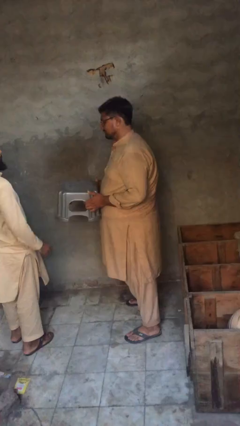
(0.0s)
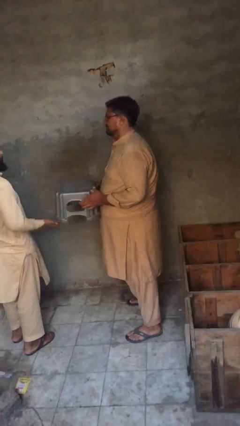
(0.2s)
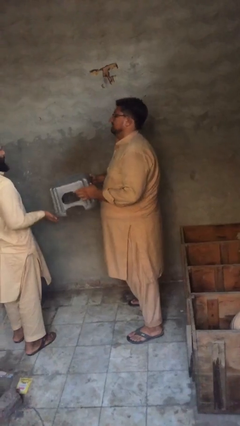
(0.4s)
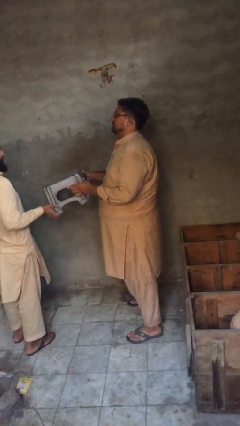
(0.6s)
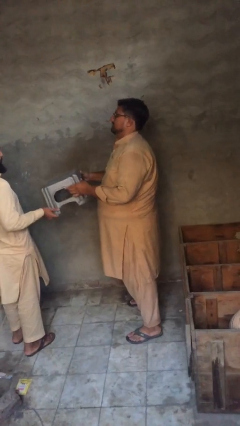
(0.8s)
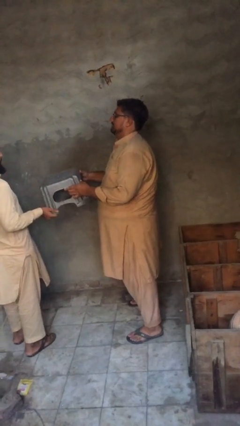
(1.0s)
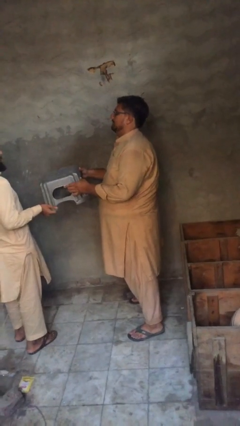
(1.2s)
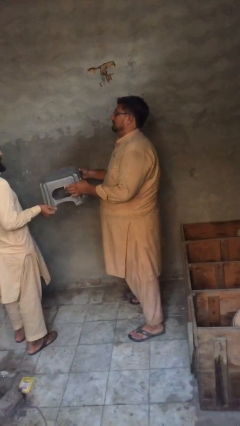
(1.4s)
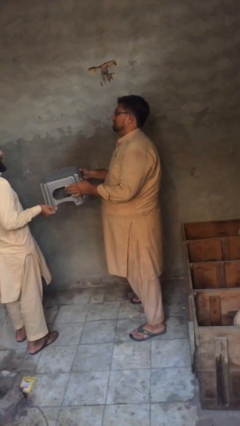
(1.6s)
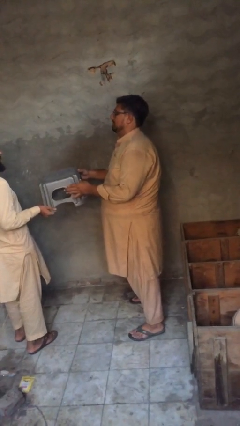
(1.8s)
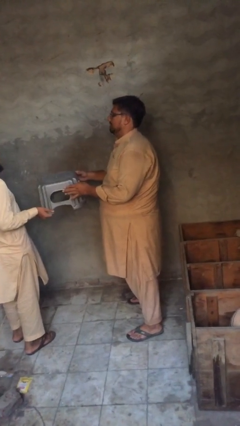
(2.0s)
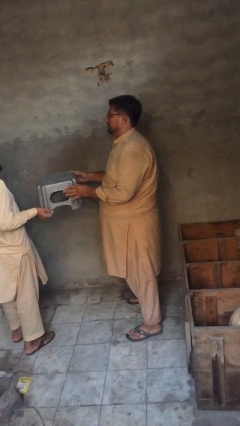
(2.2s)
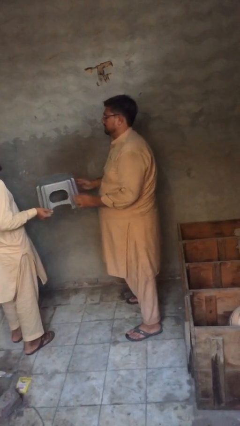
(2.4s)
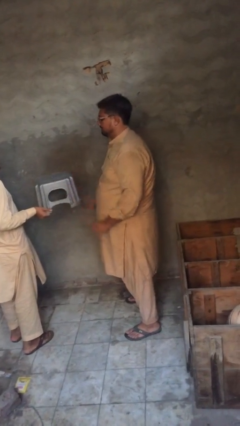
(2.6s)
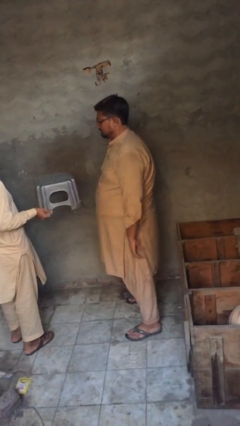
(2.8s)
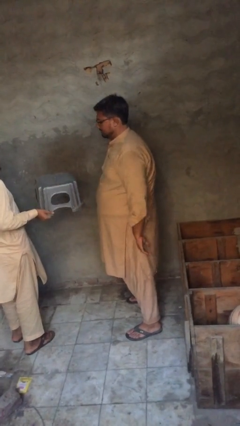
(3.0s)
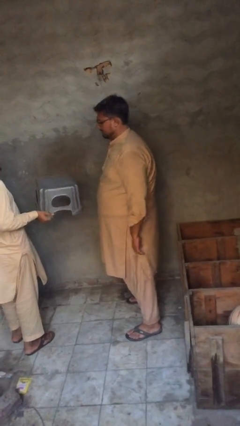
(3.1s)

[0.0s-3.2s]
person transfers object to person

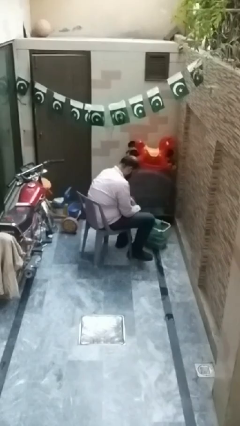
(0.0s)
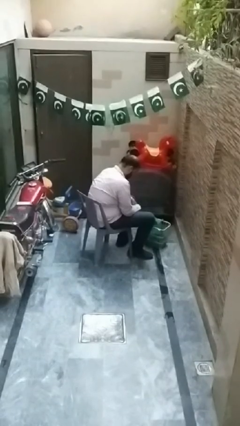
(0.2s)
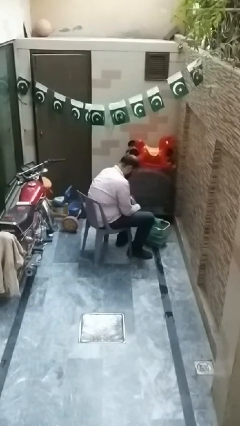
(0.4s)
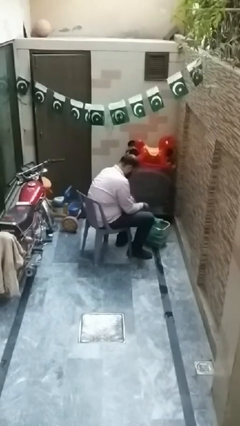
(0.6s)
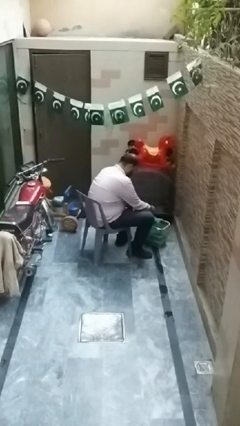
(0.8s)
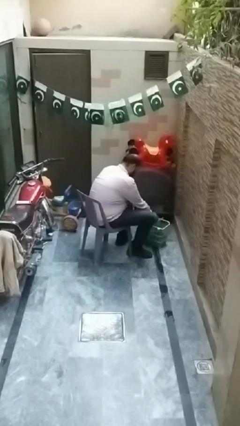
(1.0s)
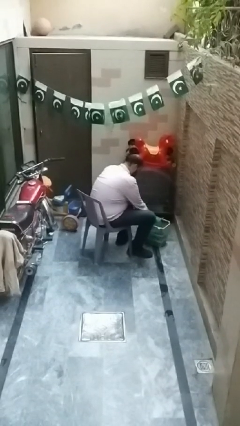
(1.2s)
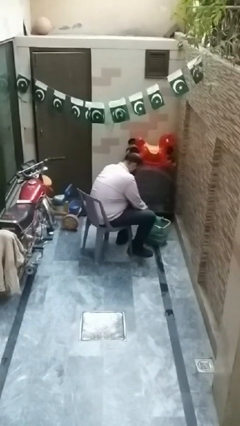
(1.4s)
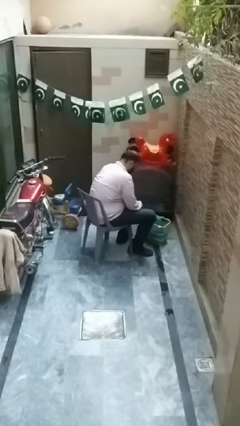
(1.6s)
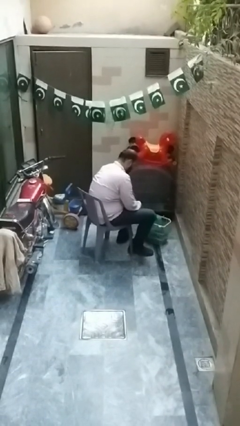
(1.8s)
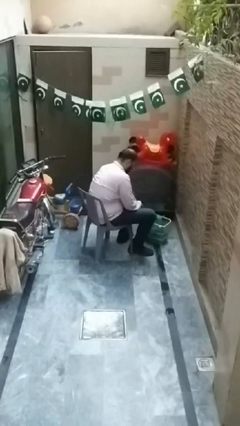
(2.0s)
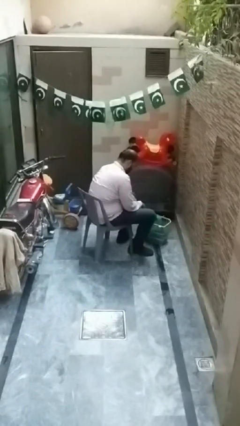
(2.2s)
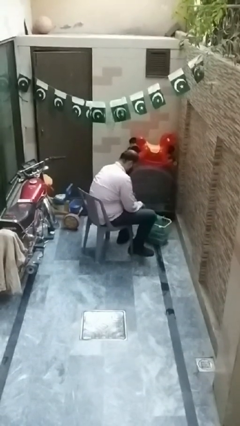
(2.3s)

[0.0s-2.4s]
person puts object into basket

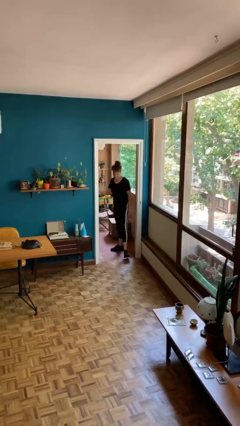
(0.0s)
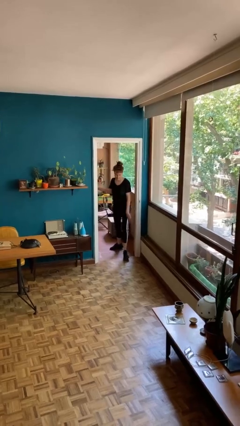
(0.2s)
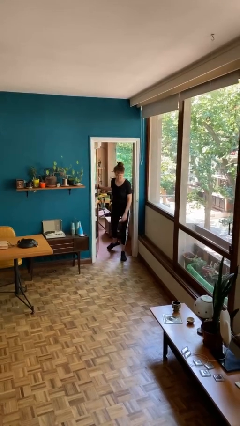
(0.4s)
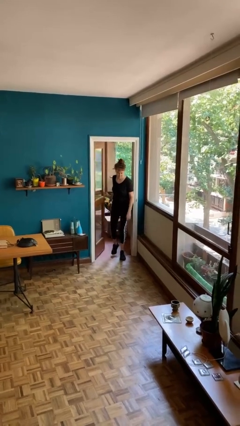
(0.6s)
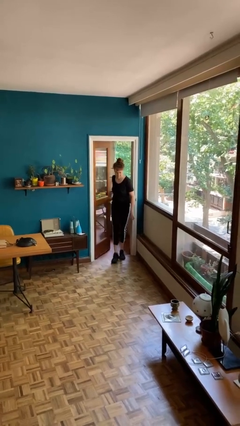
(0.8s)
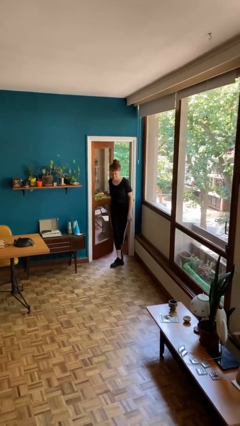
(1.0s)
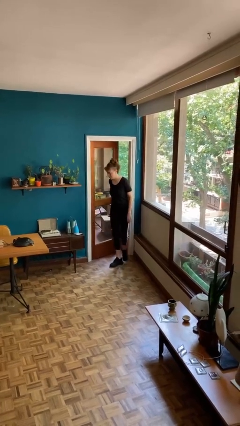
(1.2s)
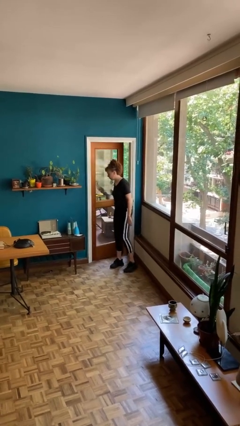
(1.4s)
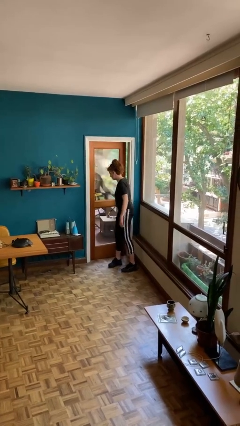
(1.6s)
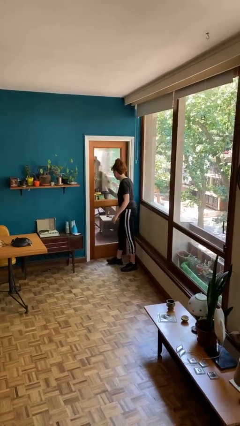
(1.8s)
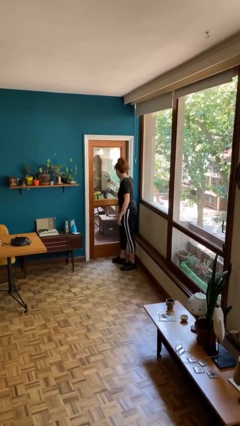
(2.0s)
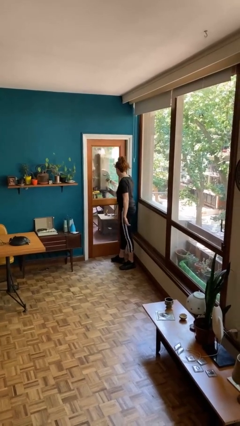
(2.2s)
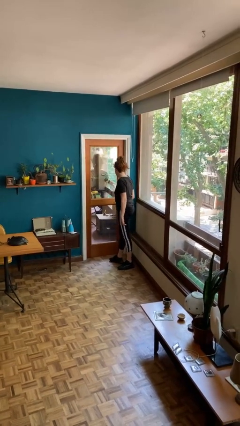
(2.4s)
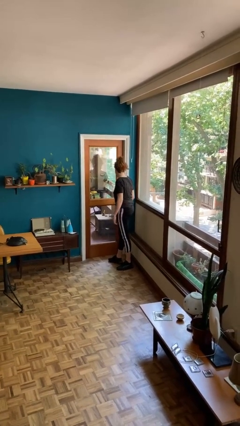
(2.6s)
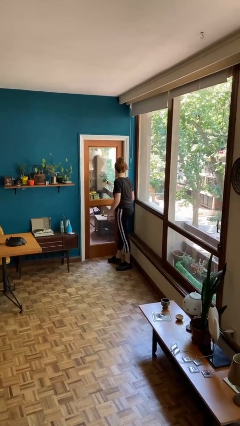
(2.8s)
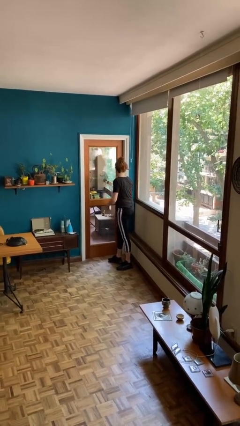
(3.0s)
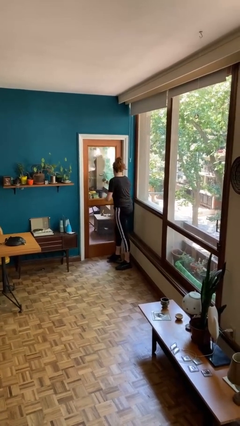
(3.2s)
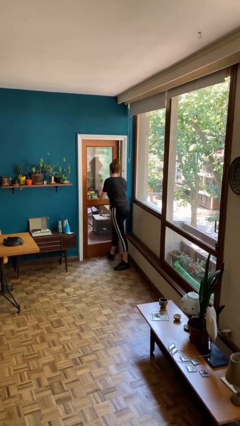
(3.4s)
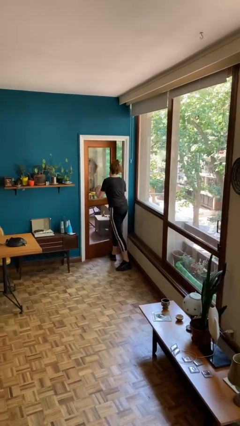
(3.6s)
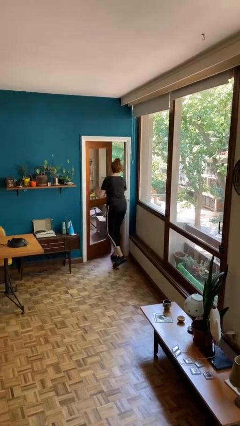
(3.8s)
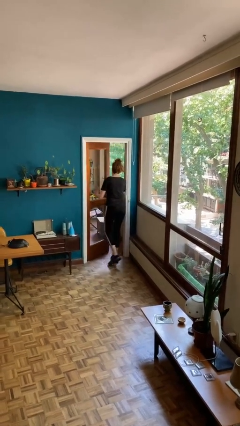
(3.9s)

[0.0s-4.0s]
person closes facility door

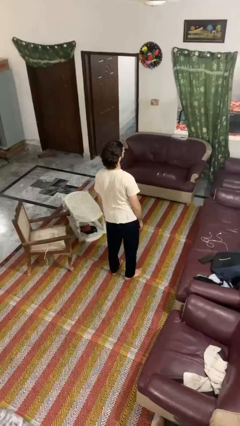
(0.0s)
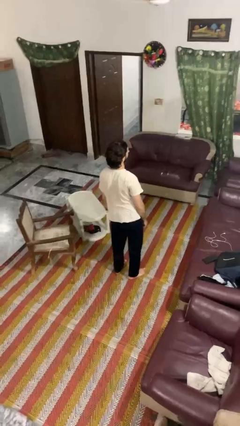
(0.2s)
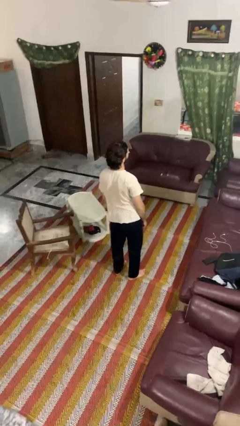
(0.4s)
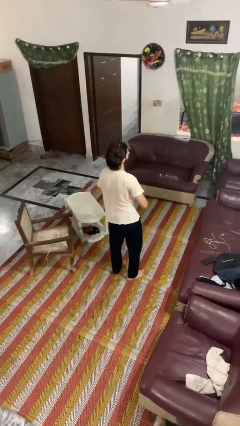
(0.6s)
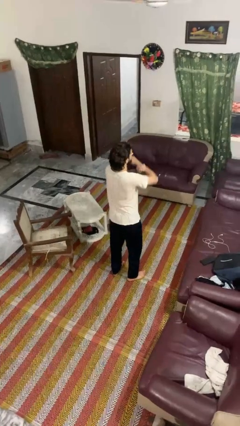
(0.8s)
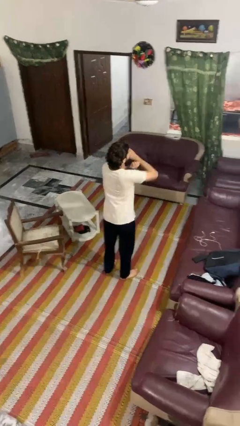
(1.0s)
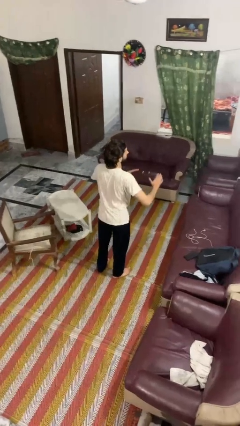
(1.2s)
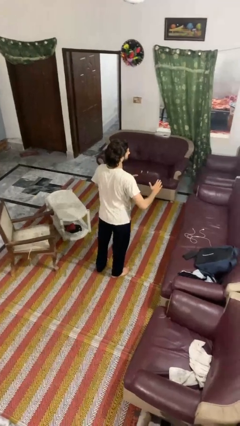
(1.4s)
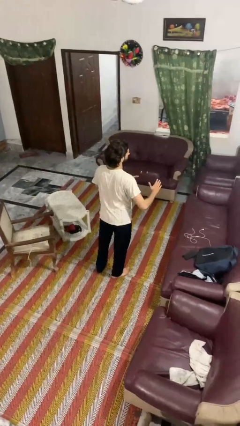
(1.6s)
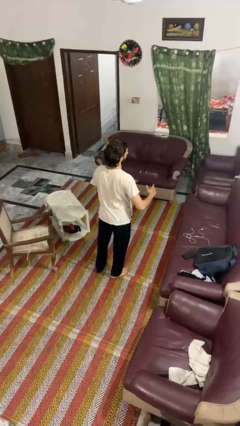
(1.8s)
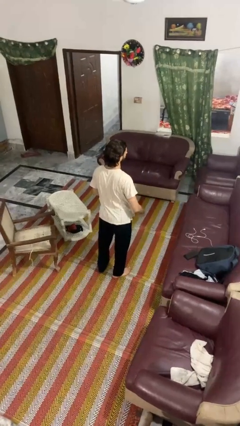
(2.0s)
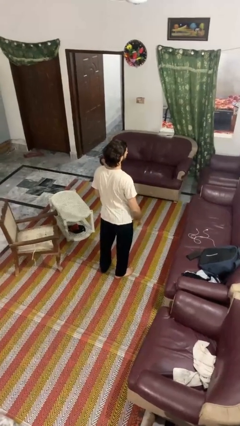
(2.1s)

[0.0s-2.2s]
person karate chop

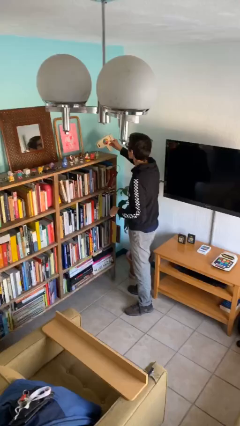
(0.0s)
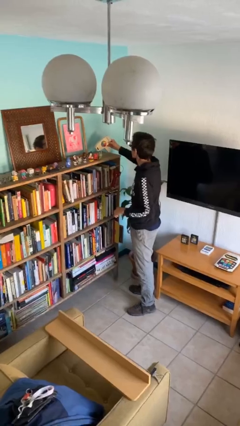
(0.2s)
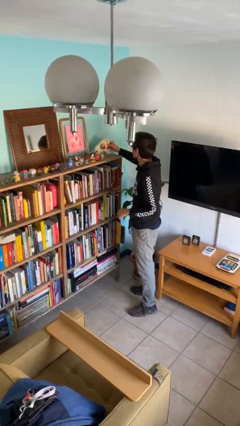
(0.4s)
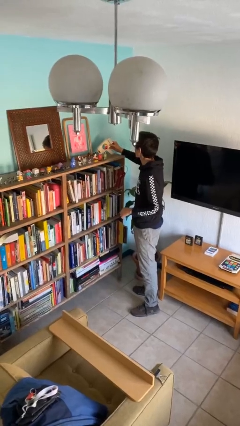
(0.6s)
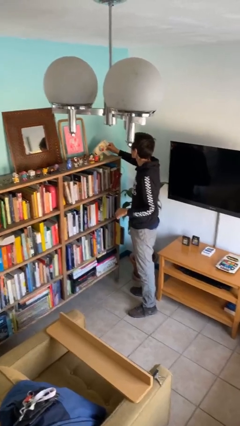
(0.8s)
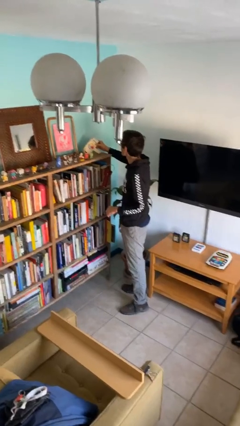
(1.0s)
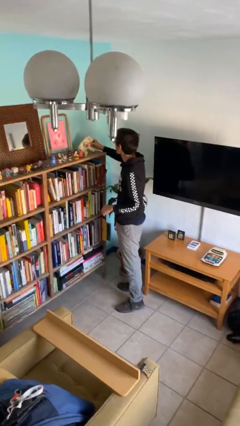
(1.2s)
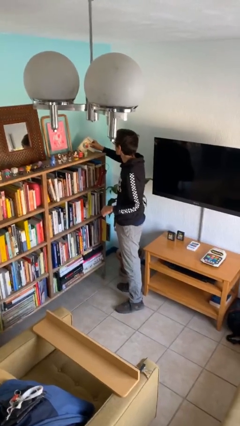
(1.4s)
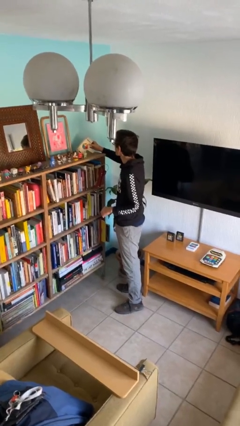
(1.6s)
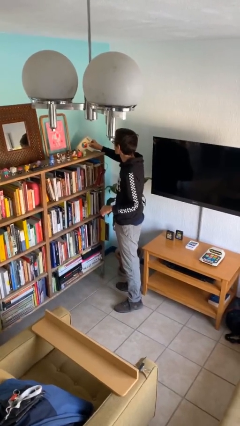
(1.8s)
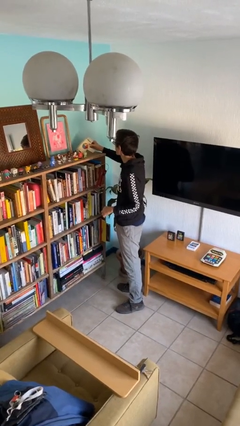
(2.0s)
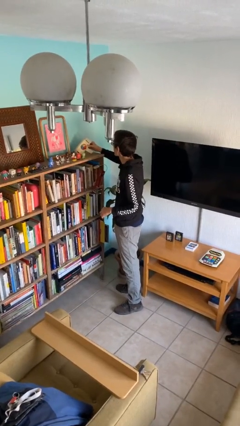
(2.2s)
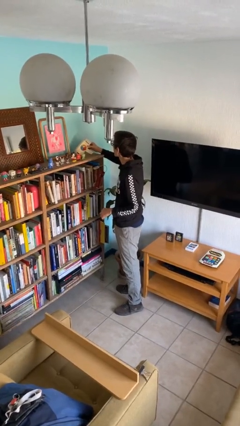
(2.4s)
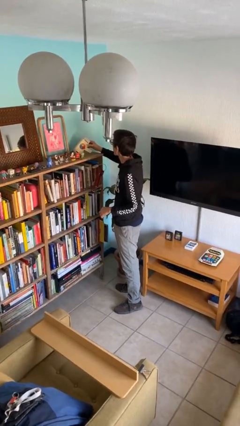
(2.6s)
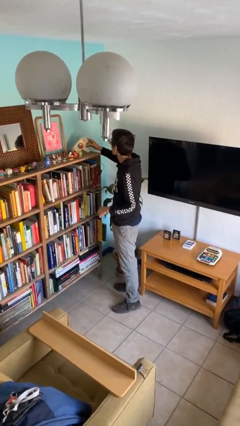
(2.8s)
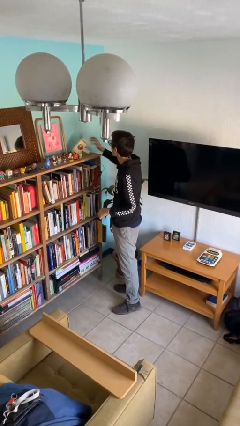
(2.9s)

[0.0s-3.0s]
person puts down object on shelf

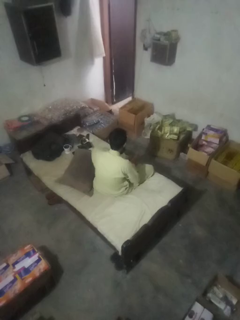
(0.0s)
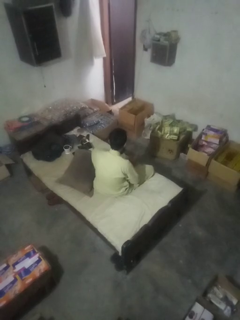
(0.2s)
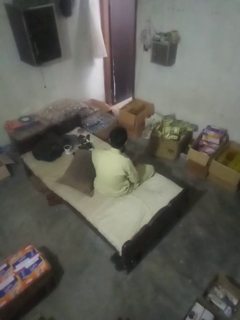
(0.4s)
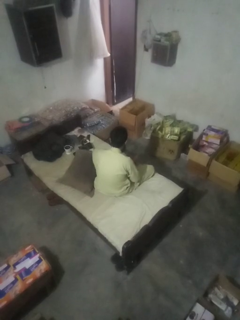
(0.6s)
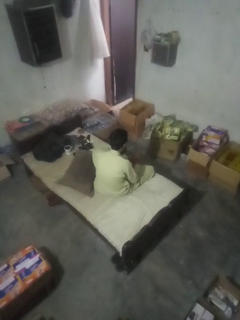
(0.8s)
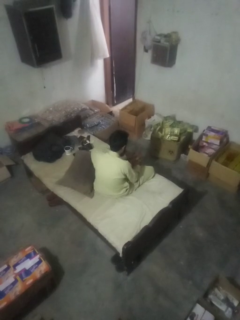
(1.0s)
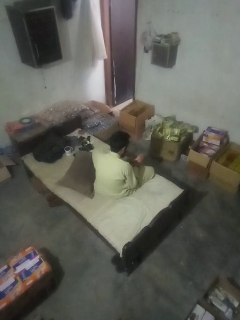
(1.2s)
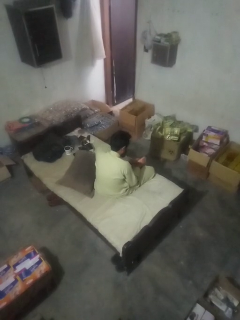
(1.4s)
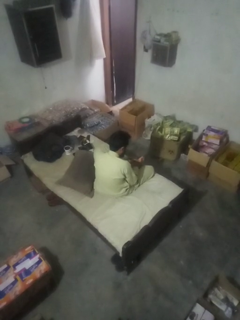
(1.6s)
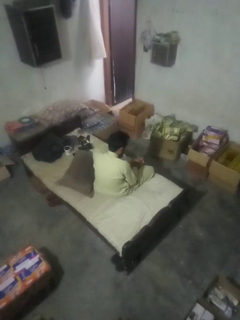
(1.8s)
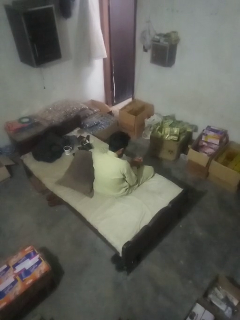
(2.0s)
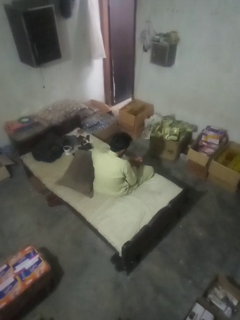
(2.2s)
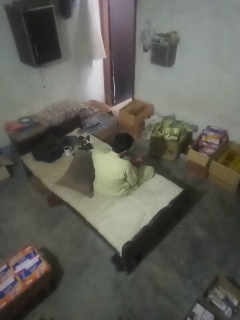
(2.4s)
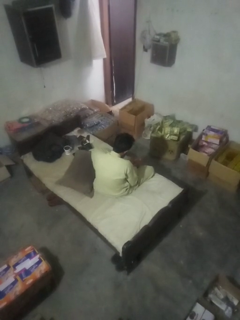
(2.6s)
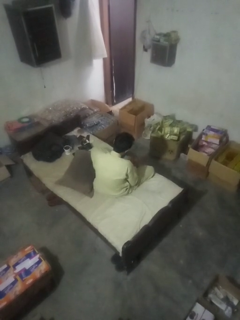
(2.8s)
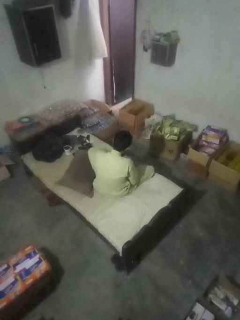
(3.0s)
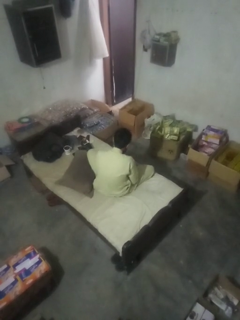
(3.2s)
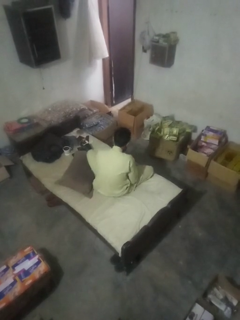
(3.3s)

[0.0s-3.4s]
person rubs foot

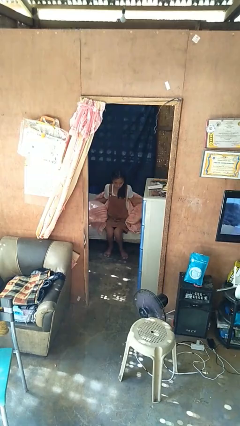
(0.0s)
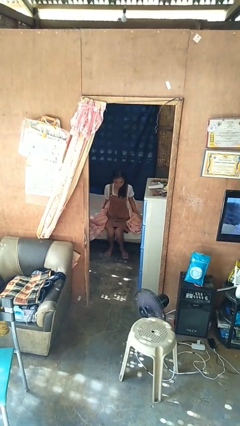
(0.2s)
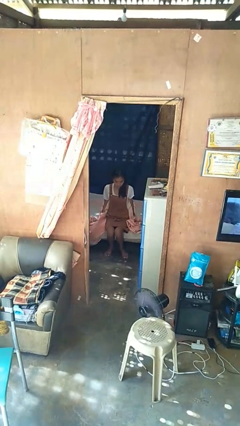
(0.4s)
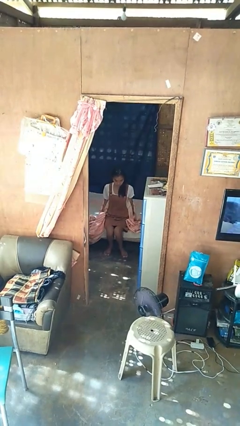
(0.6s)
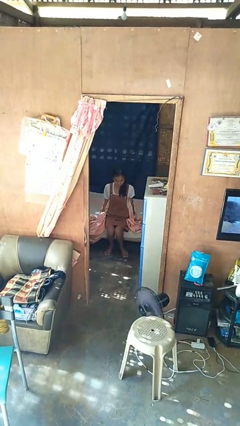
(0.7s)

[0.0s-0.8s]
person uncovers with blanket
